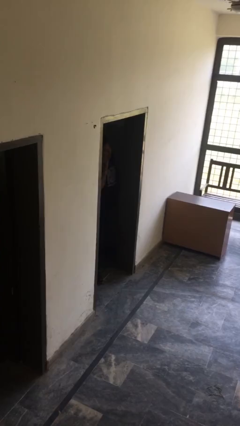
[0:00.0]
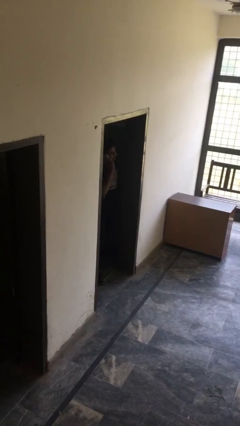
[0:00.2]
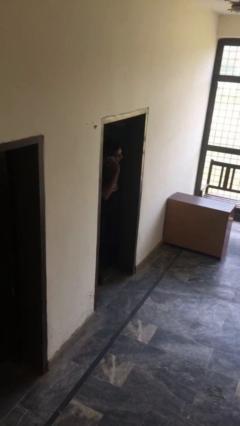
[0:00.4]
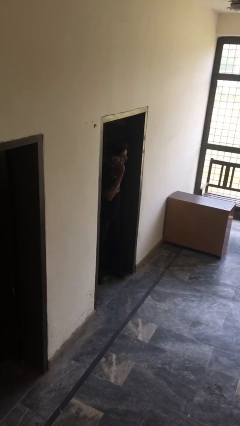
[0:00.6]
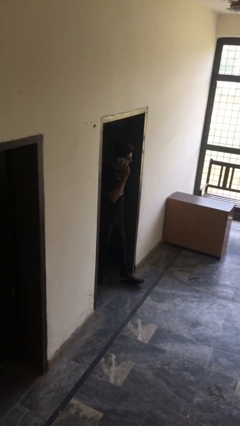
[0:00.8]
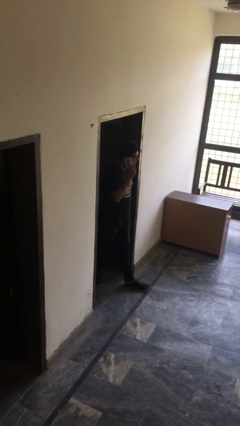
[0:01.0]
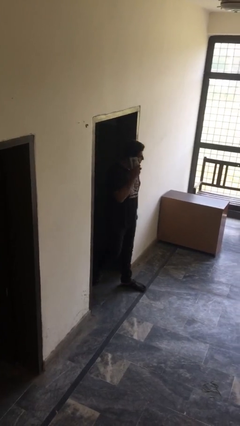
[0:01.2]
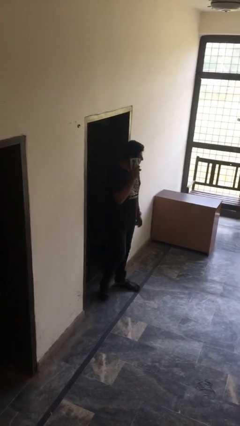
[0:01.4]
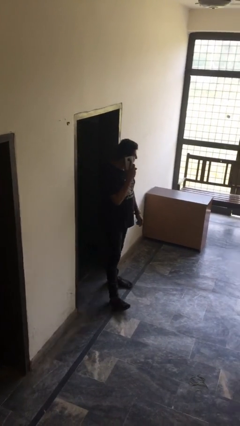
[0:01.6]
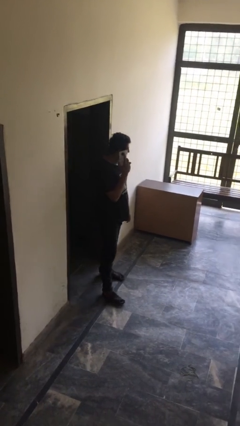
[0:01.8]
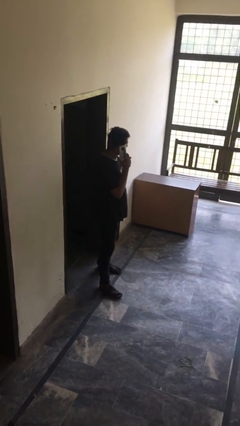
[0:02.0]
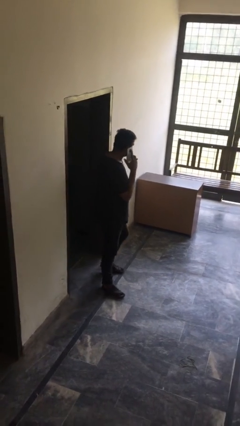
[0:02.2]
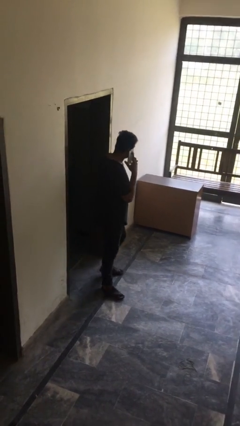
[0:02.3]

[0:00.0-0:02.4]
person enters scene through structure

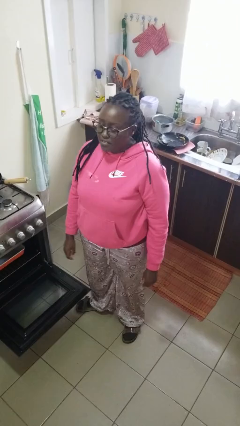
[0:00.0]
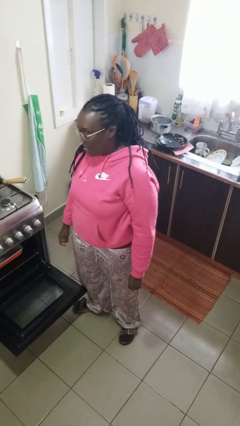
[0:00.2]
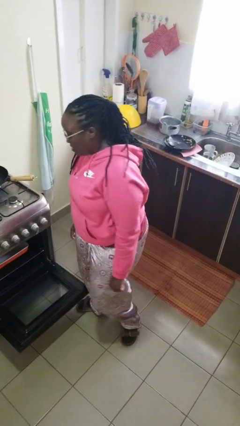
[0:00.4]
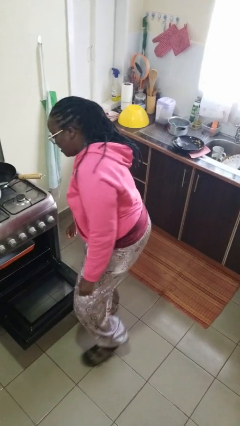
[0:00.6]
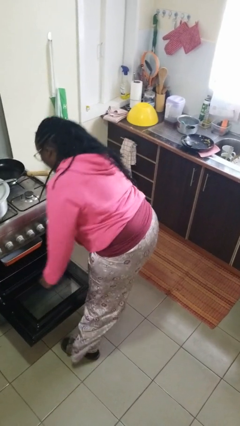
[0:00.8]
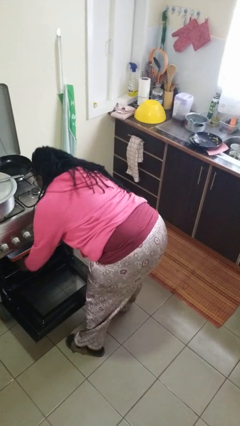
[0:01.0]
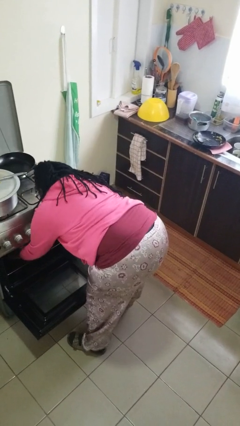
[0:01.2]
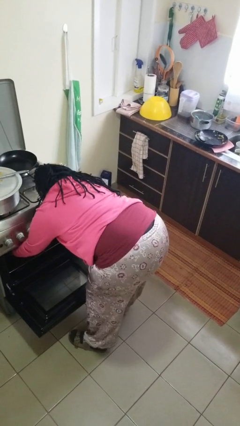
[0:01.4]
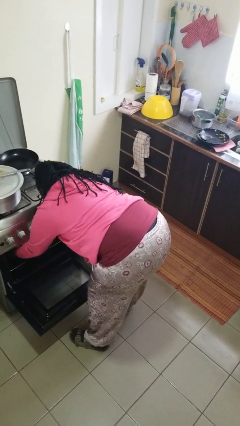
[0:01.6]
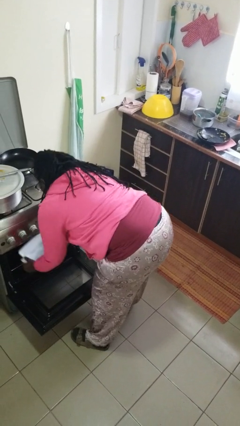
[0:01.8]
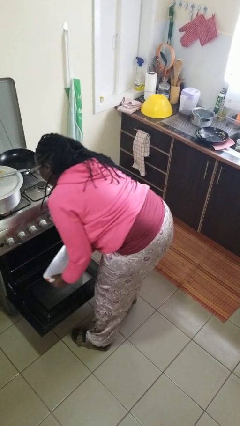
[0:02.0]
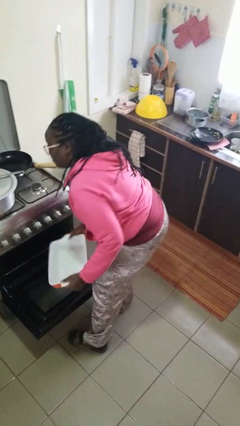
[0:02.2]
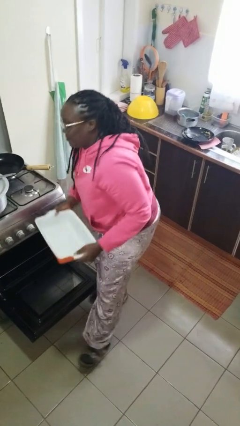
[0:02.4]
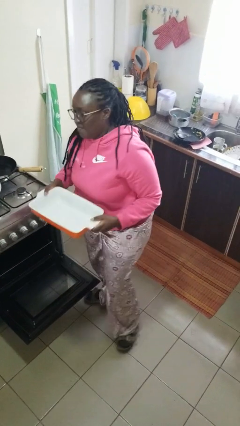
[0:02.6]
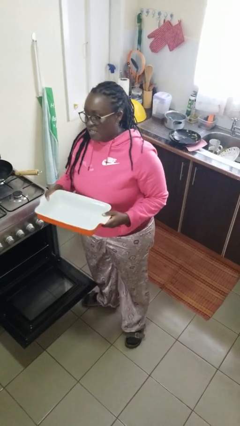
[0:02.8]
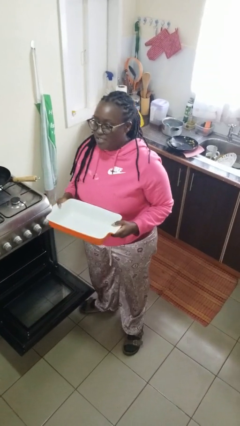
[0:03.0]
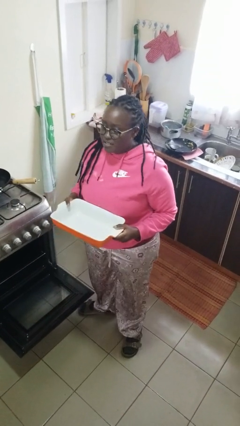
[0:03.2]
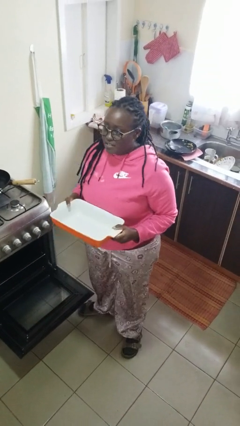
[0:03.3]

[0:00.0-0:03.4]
person takes object from oven

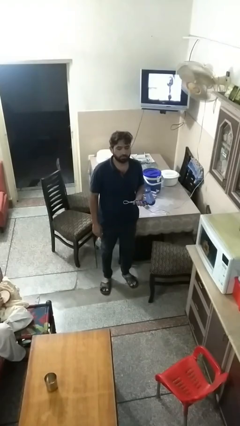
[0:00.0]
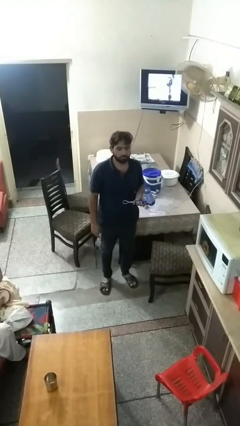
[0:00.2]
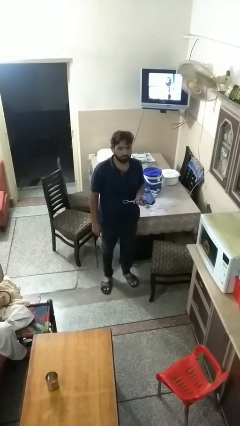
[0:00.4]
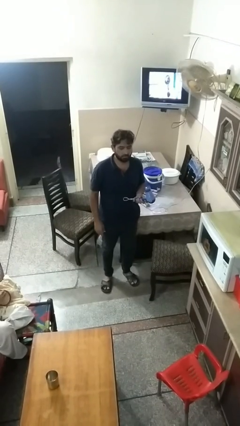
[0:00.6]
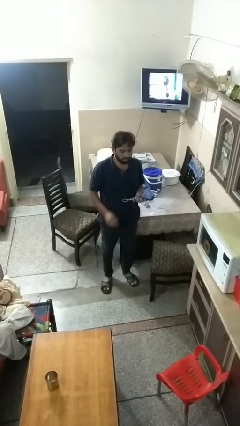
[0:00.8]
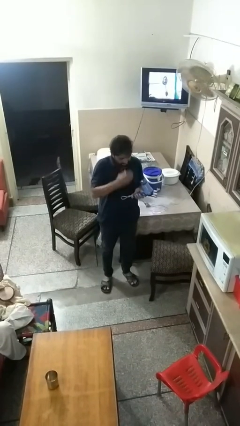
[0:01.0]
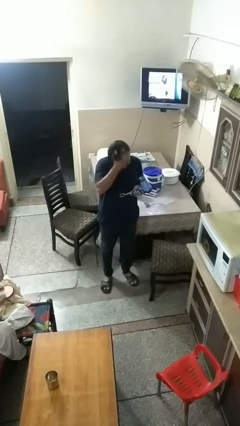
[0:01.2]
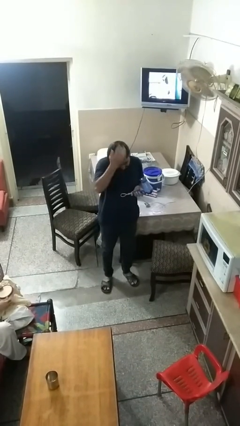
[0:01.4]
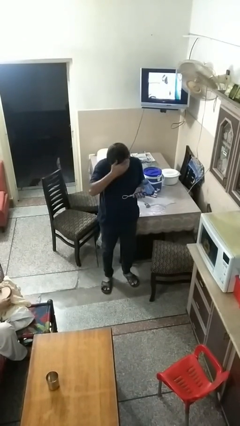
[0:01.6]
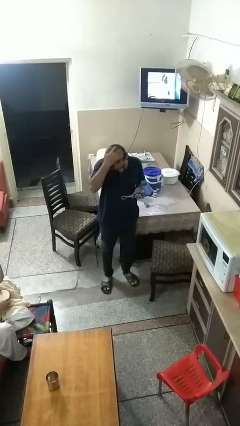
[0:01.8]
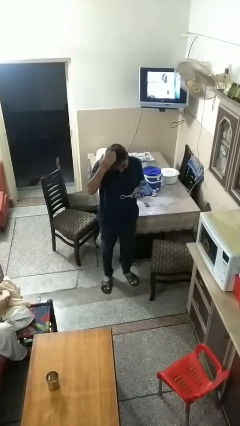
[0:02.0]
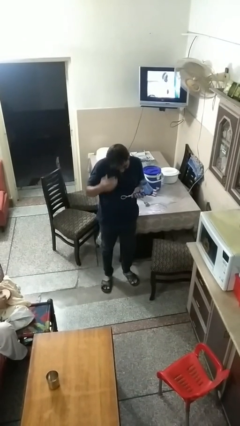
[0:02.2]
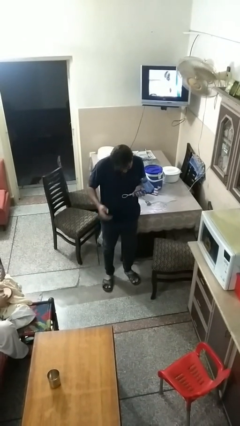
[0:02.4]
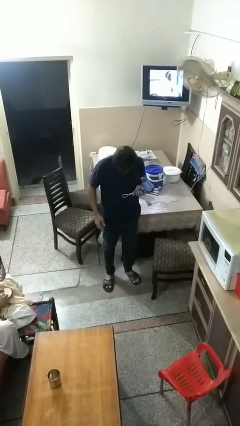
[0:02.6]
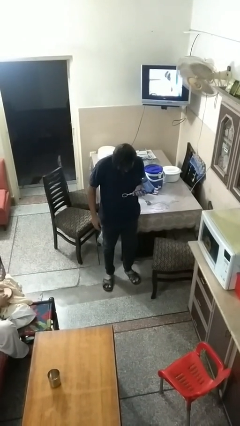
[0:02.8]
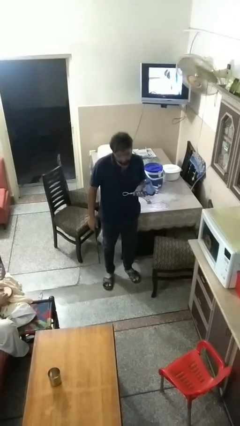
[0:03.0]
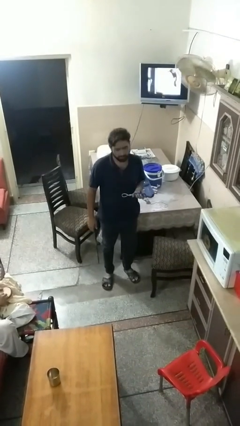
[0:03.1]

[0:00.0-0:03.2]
person dries hair with hairdryer

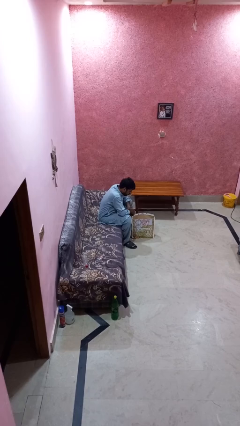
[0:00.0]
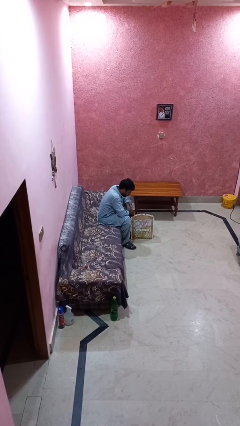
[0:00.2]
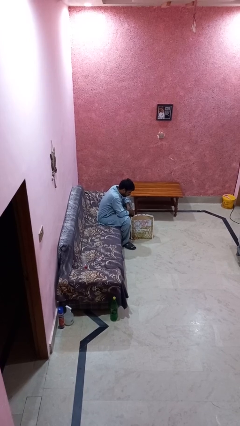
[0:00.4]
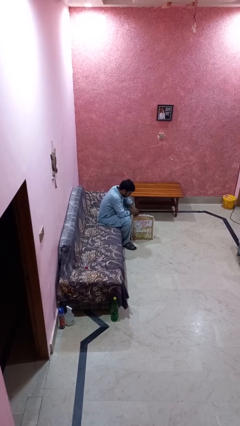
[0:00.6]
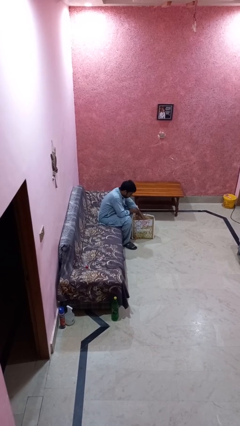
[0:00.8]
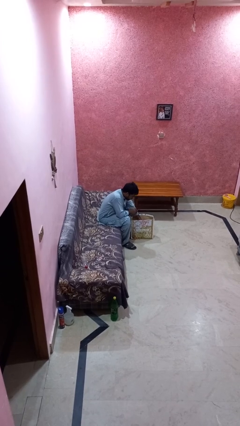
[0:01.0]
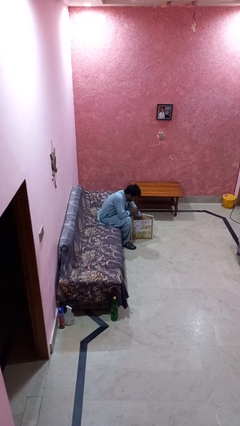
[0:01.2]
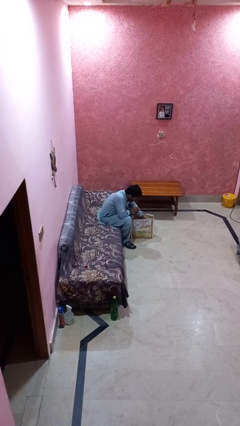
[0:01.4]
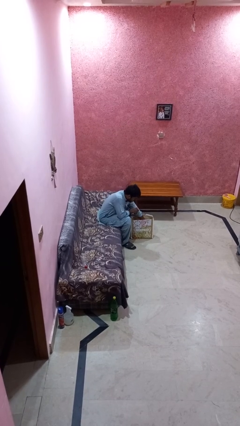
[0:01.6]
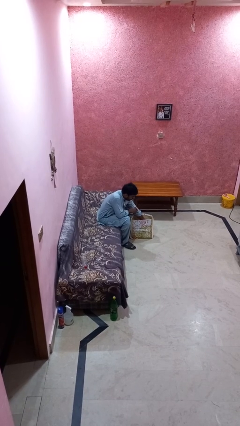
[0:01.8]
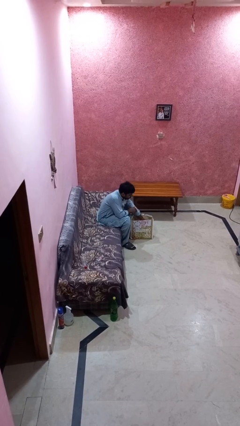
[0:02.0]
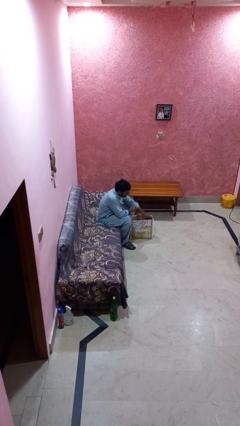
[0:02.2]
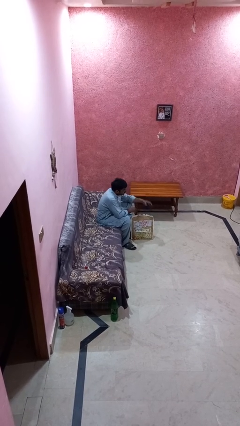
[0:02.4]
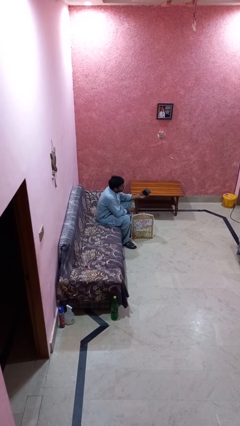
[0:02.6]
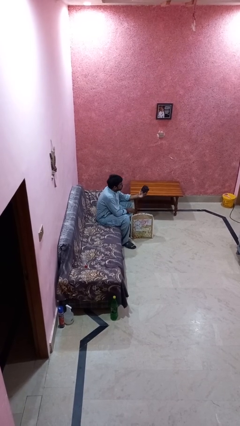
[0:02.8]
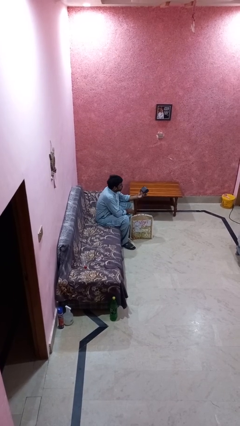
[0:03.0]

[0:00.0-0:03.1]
person takes object from bag

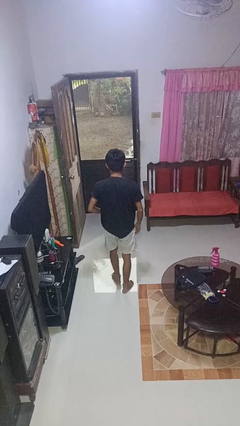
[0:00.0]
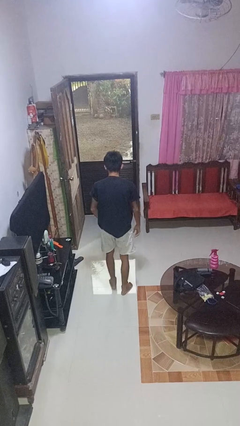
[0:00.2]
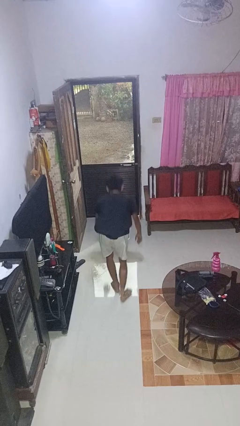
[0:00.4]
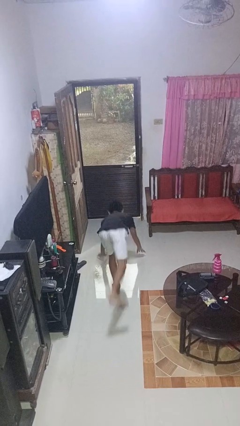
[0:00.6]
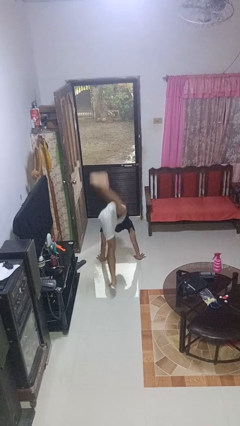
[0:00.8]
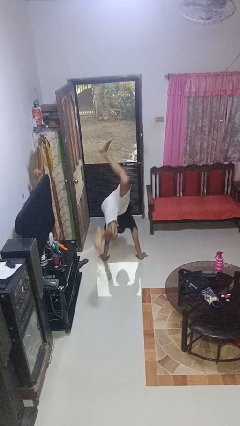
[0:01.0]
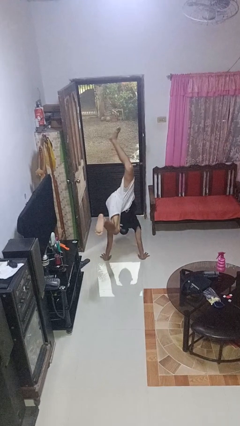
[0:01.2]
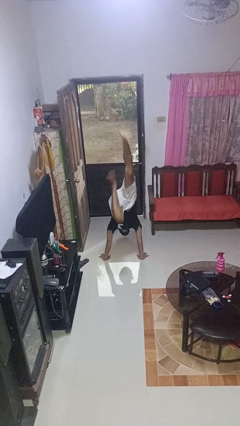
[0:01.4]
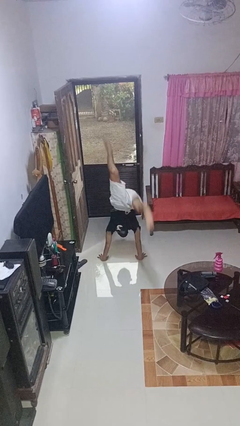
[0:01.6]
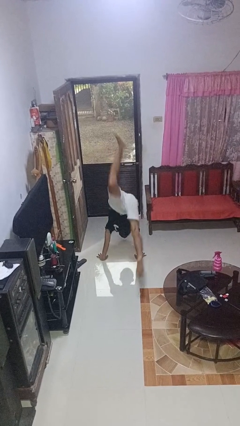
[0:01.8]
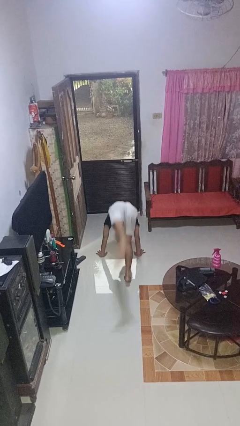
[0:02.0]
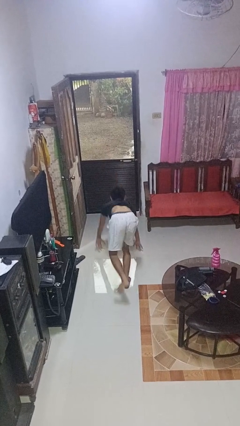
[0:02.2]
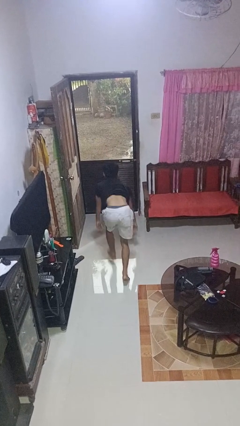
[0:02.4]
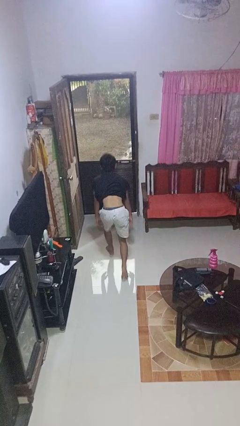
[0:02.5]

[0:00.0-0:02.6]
person handstand

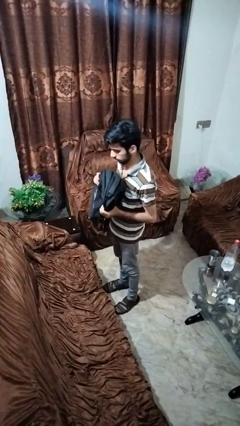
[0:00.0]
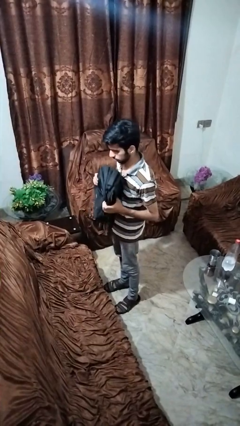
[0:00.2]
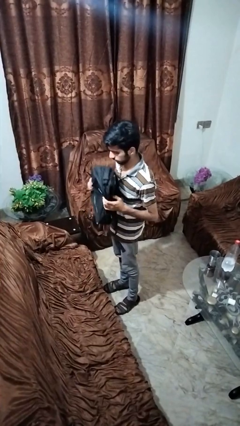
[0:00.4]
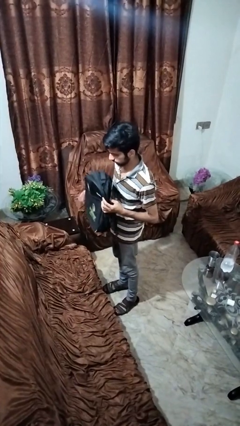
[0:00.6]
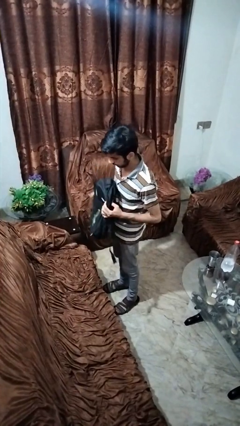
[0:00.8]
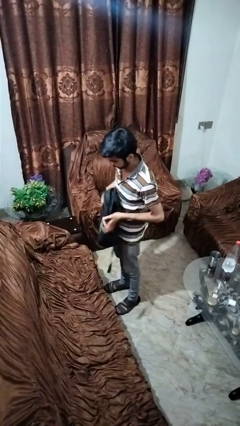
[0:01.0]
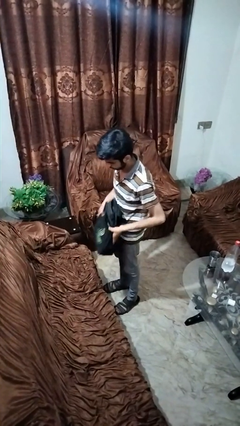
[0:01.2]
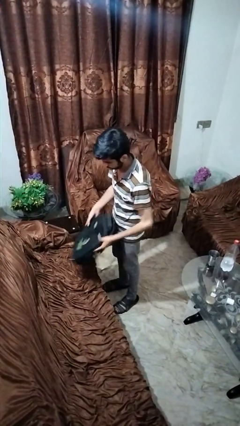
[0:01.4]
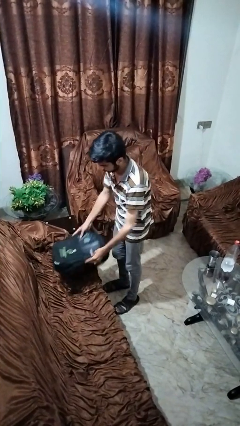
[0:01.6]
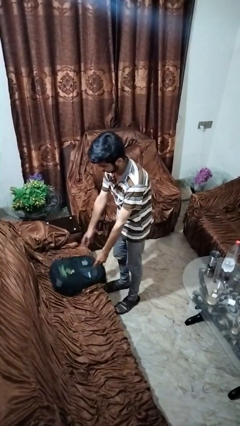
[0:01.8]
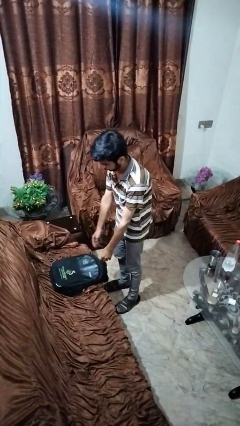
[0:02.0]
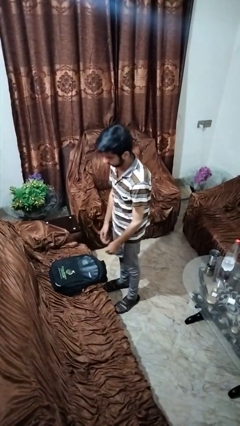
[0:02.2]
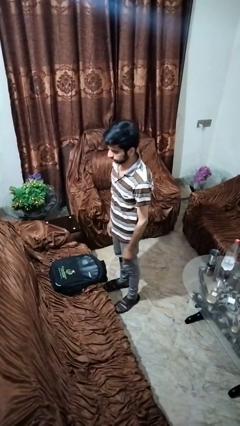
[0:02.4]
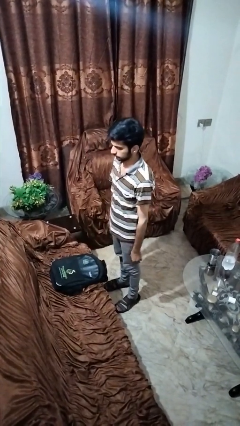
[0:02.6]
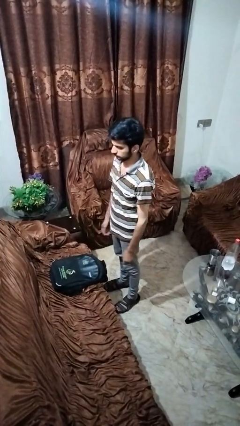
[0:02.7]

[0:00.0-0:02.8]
person puts down object on couch
